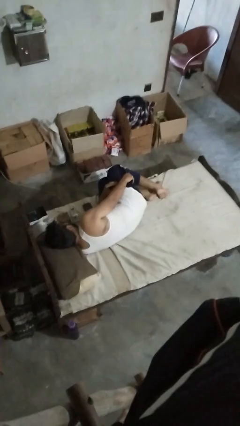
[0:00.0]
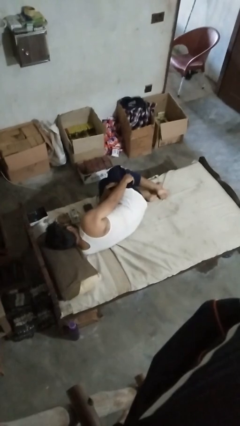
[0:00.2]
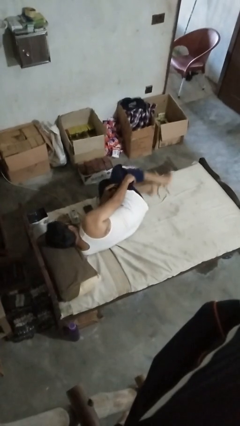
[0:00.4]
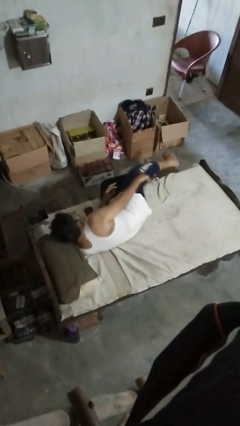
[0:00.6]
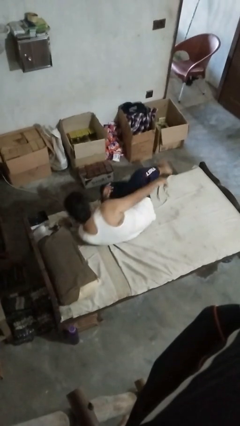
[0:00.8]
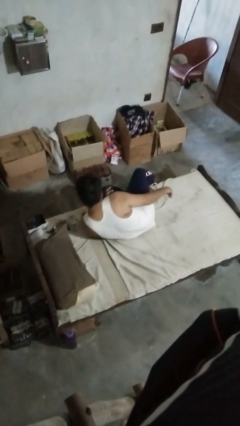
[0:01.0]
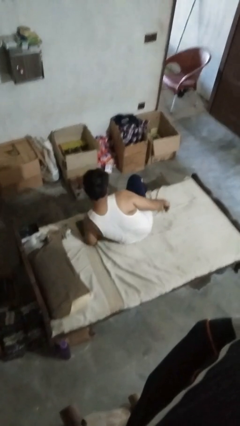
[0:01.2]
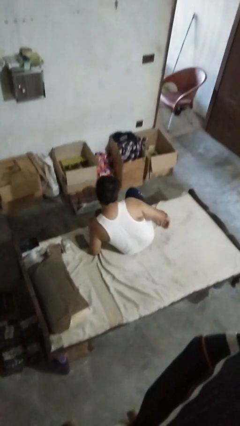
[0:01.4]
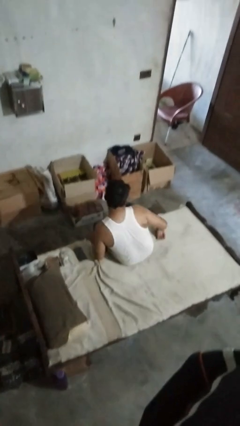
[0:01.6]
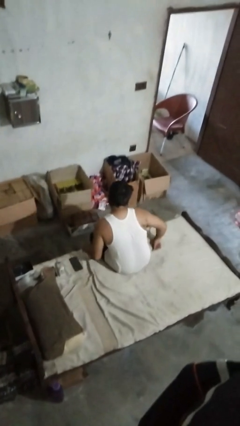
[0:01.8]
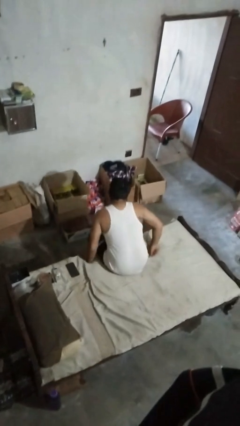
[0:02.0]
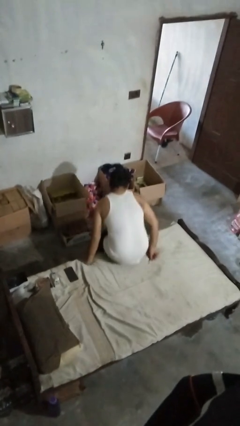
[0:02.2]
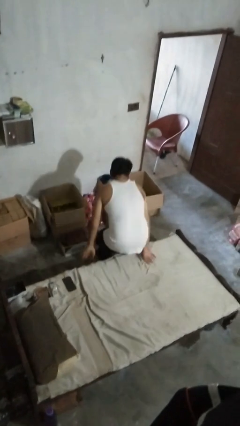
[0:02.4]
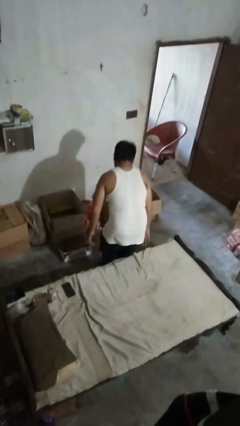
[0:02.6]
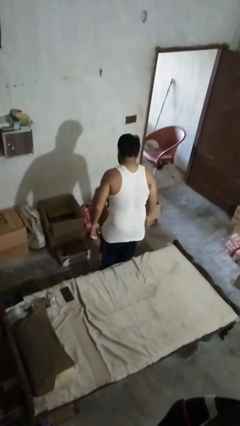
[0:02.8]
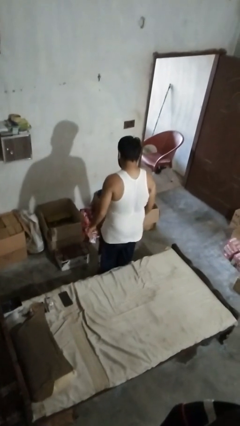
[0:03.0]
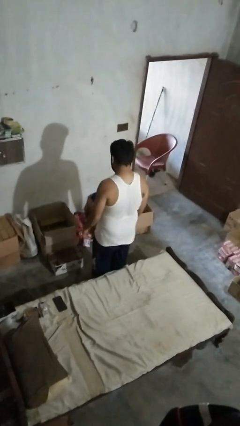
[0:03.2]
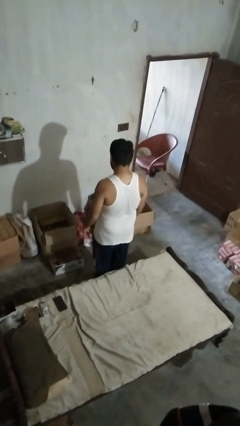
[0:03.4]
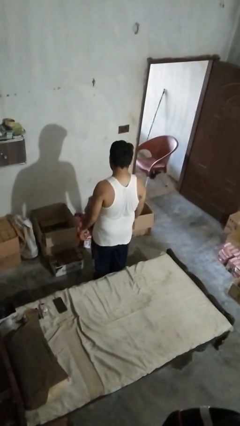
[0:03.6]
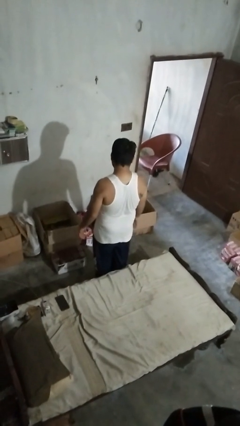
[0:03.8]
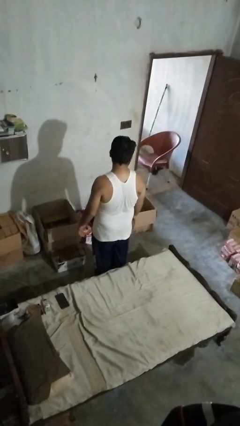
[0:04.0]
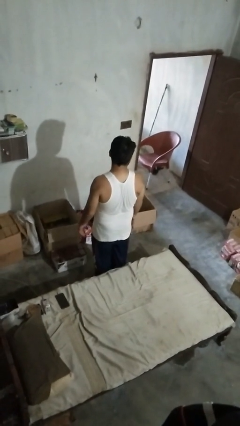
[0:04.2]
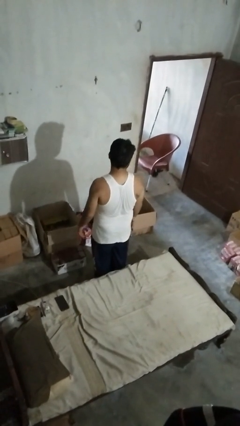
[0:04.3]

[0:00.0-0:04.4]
person stands up

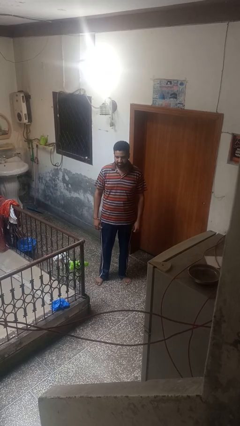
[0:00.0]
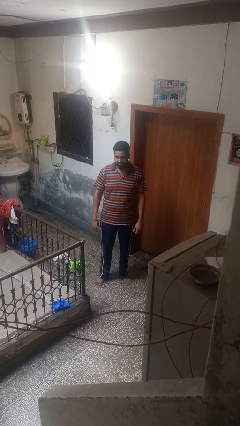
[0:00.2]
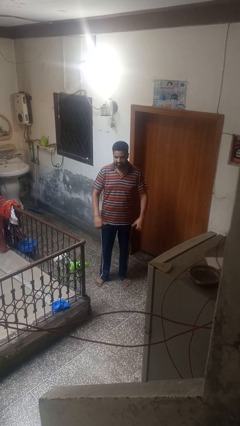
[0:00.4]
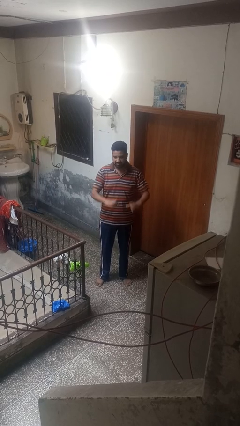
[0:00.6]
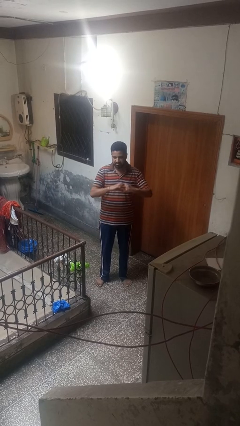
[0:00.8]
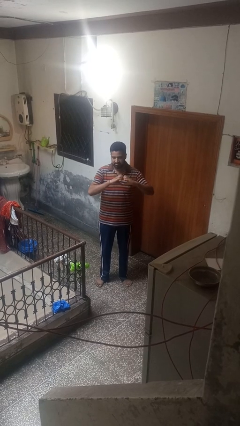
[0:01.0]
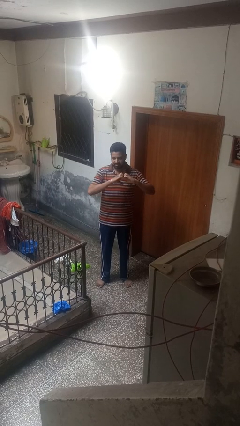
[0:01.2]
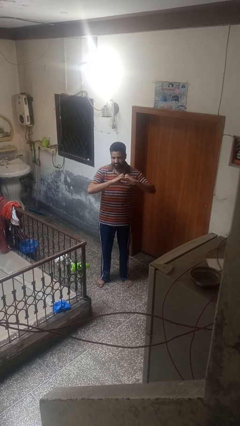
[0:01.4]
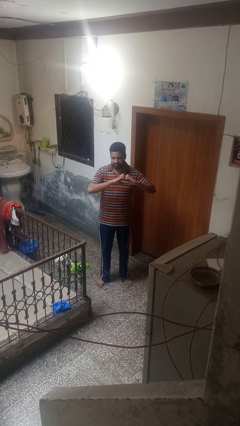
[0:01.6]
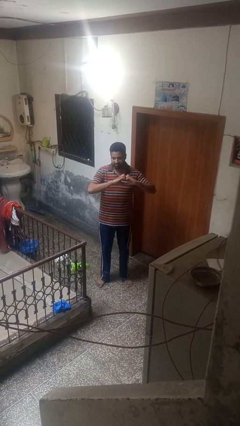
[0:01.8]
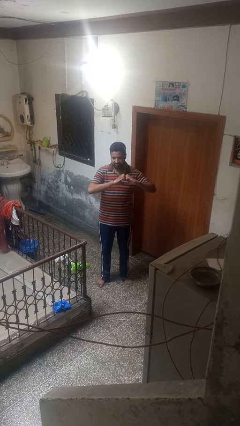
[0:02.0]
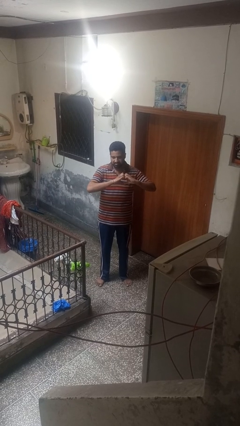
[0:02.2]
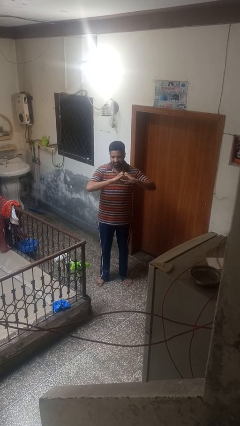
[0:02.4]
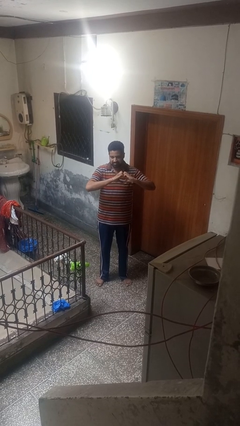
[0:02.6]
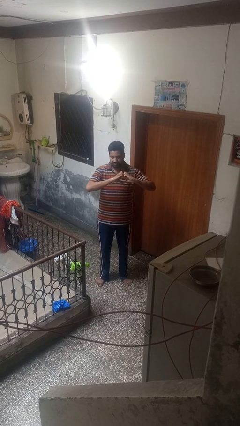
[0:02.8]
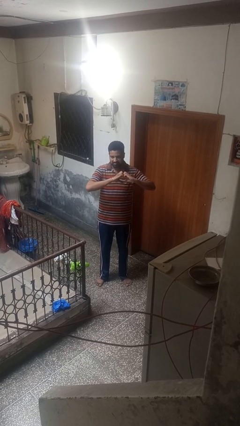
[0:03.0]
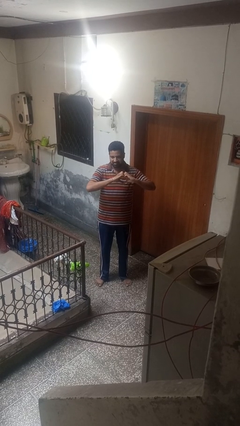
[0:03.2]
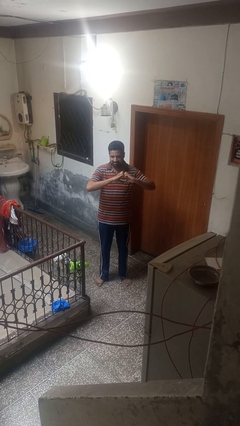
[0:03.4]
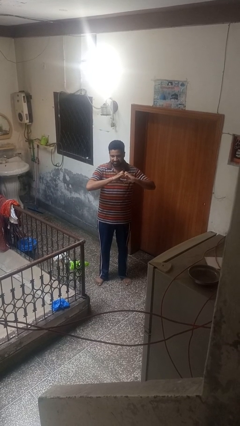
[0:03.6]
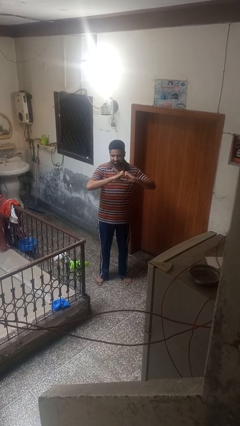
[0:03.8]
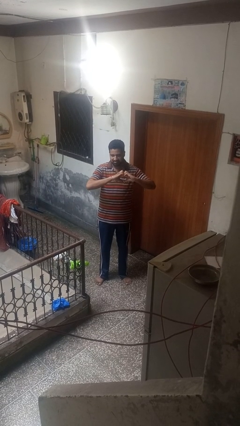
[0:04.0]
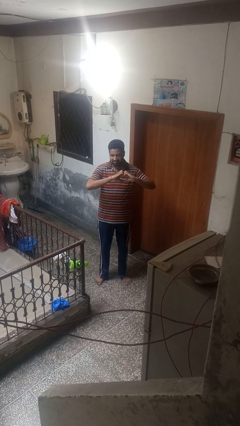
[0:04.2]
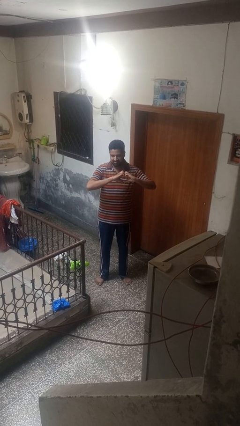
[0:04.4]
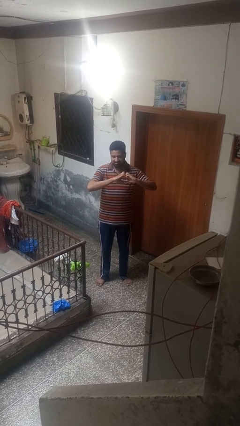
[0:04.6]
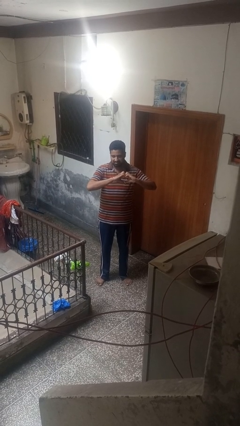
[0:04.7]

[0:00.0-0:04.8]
person gestures heart

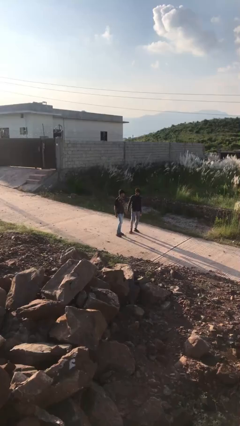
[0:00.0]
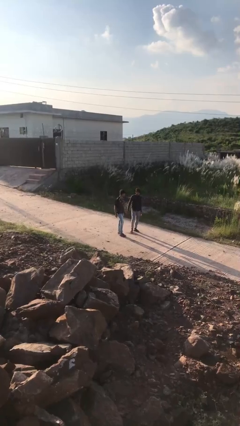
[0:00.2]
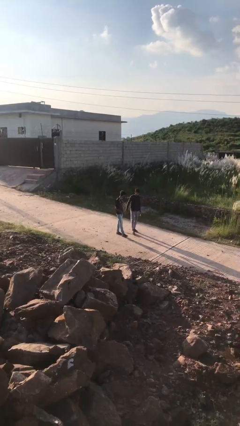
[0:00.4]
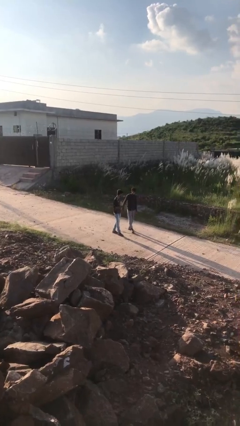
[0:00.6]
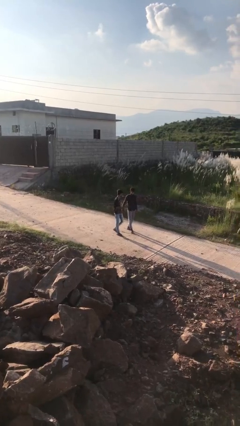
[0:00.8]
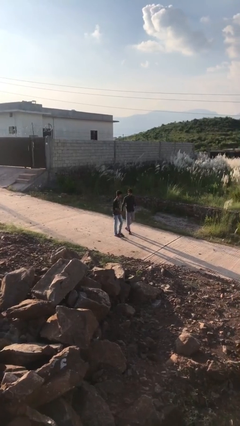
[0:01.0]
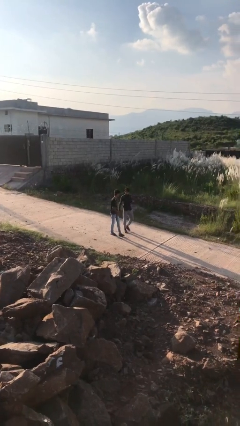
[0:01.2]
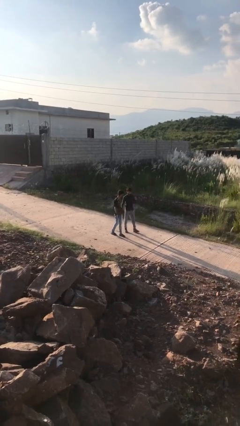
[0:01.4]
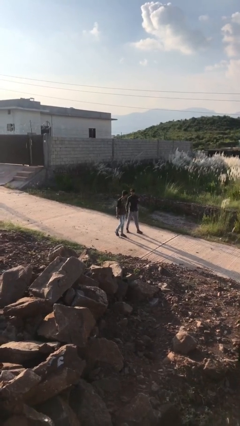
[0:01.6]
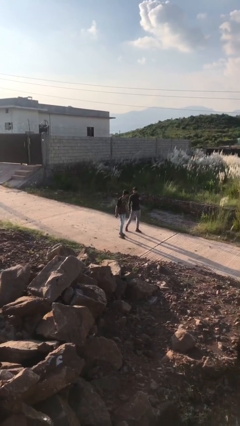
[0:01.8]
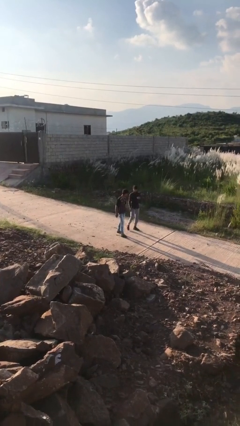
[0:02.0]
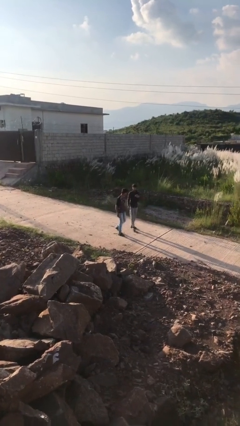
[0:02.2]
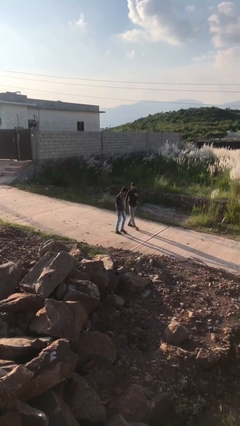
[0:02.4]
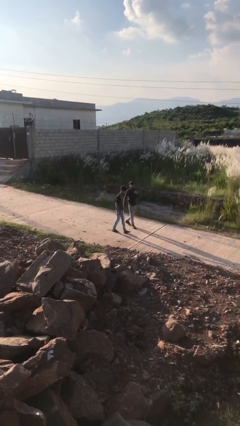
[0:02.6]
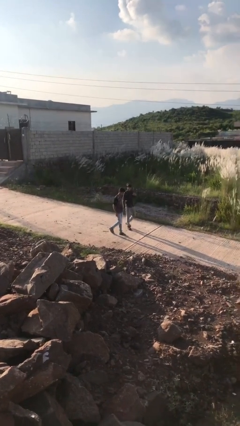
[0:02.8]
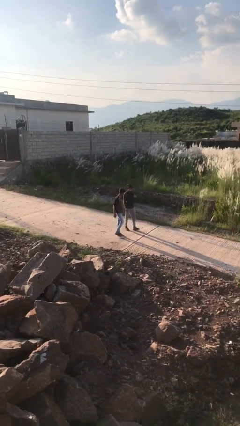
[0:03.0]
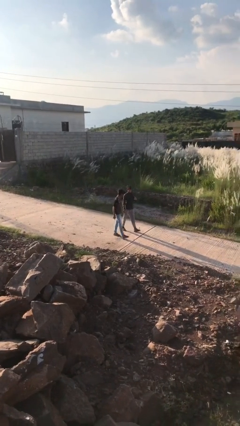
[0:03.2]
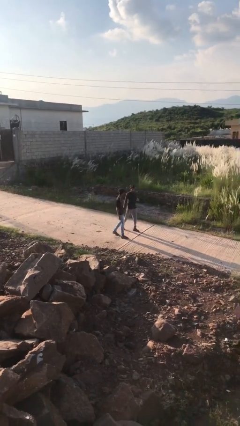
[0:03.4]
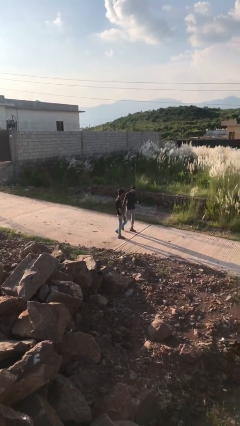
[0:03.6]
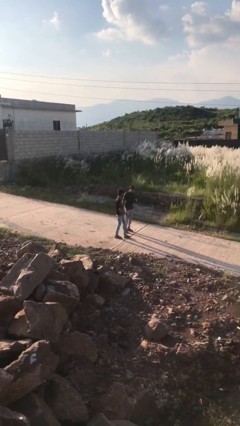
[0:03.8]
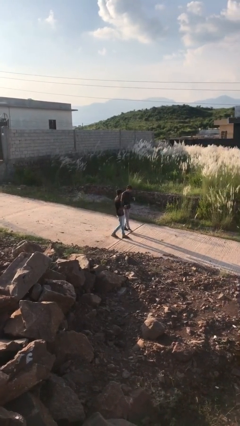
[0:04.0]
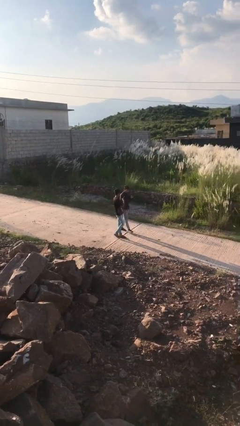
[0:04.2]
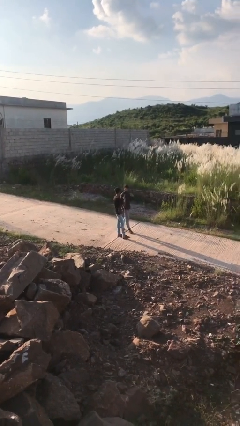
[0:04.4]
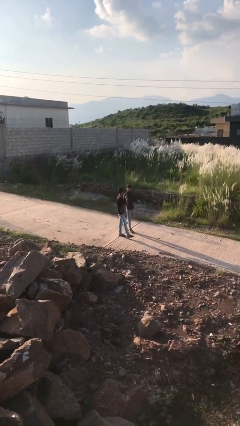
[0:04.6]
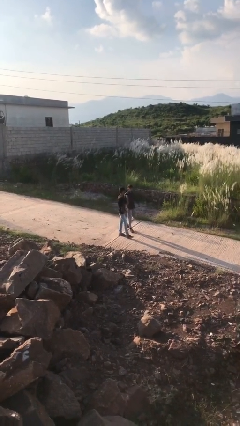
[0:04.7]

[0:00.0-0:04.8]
person holds hand

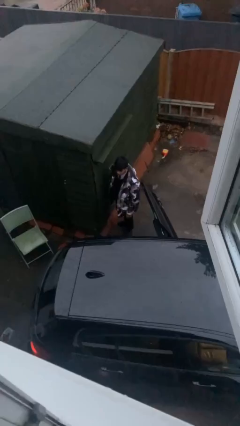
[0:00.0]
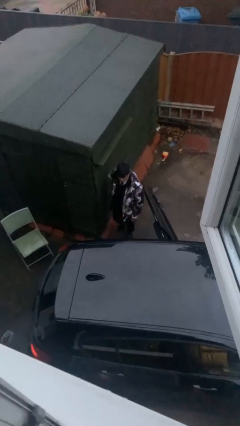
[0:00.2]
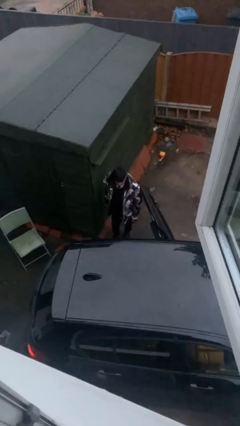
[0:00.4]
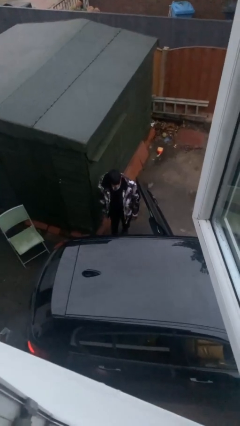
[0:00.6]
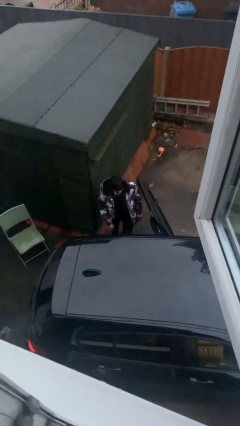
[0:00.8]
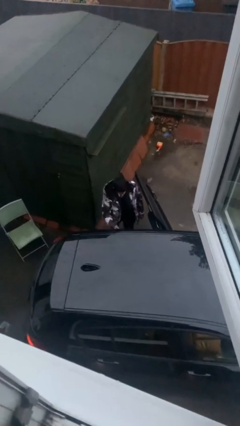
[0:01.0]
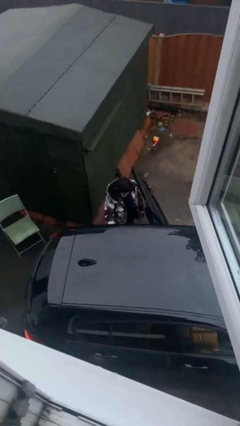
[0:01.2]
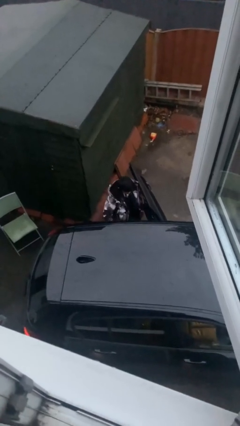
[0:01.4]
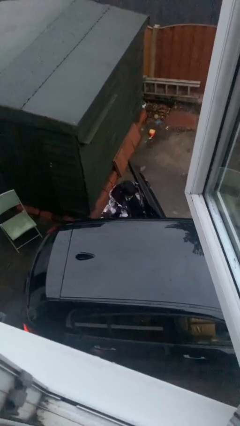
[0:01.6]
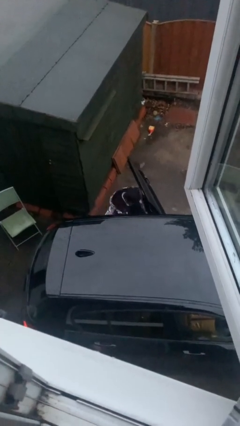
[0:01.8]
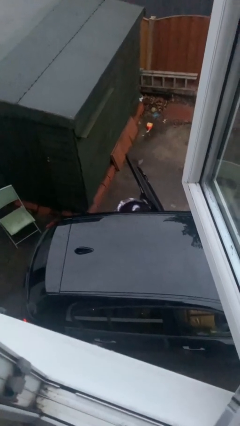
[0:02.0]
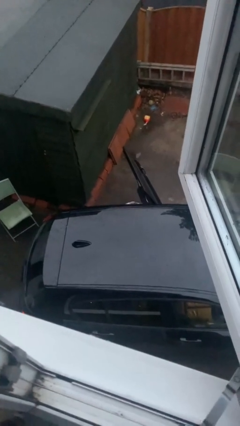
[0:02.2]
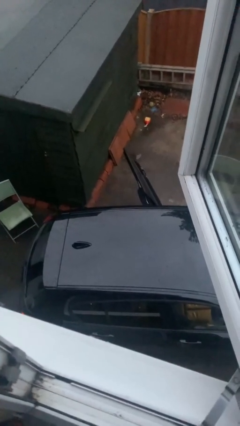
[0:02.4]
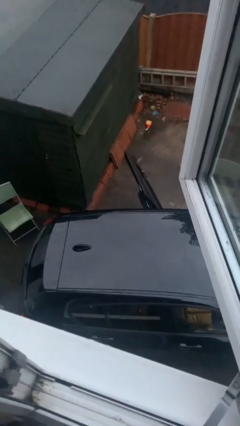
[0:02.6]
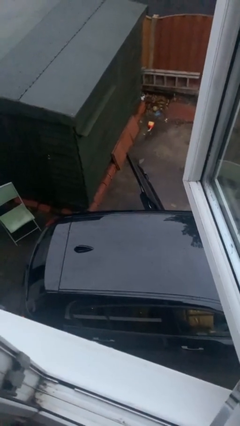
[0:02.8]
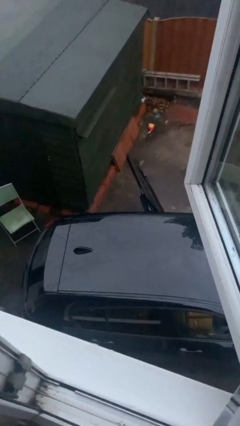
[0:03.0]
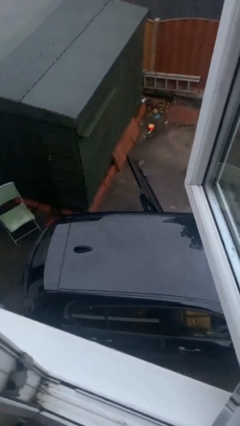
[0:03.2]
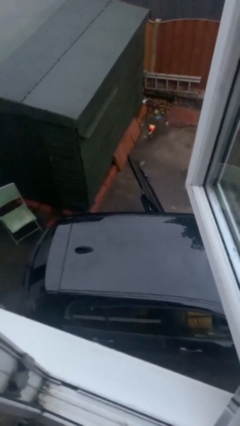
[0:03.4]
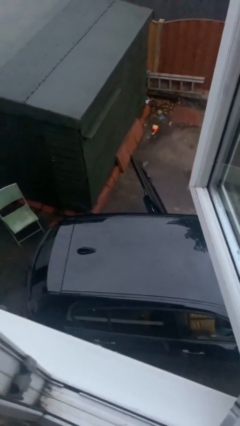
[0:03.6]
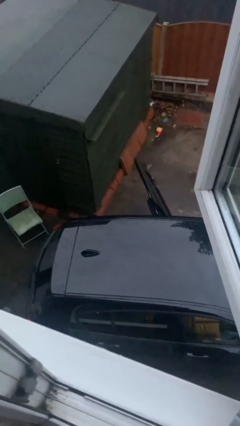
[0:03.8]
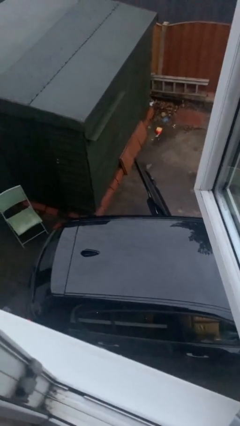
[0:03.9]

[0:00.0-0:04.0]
person enters car
